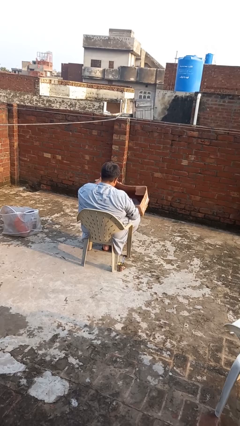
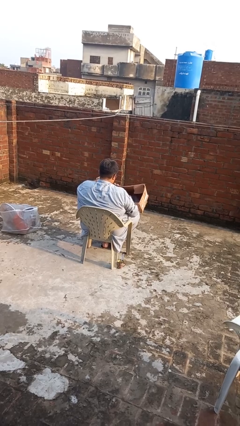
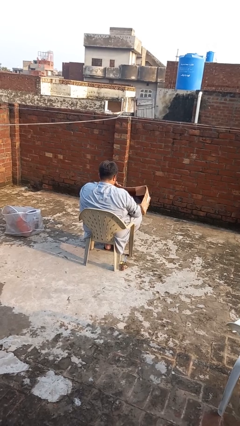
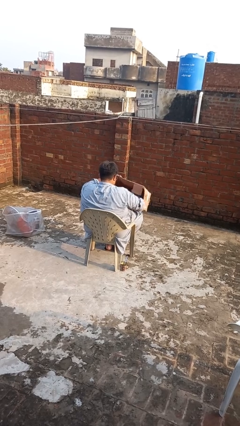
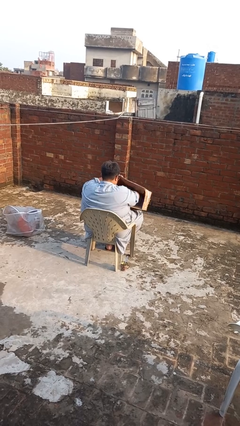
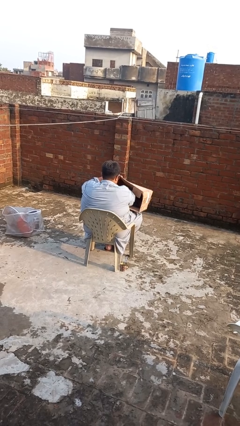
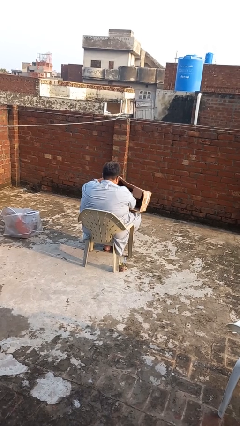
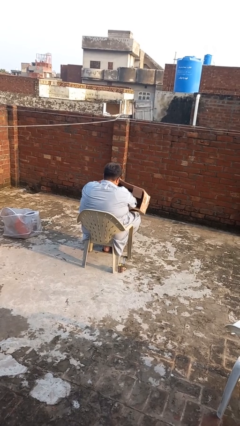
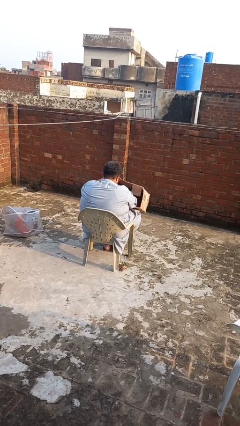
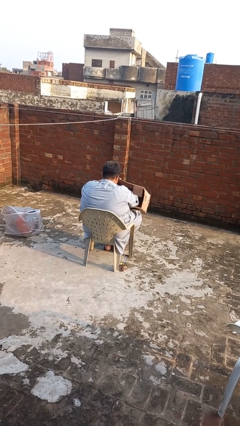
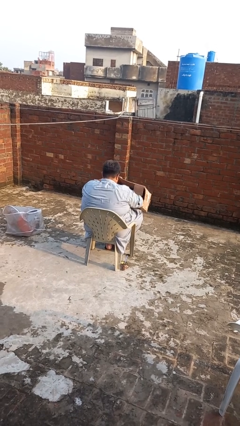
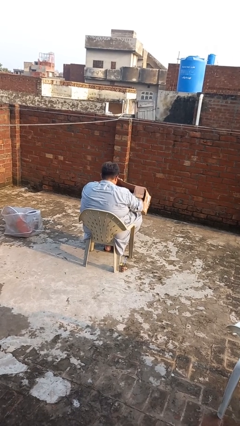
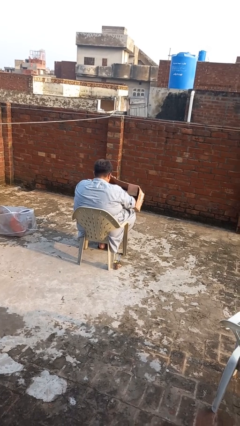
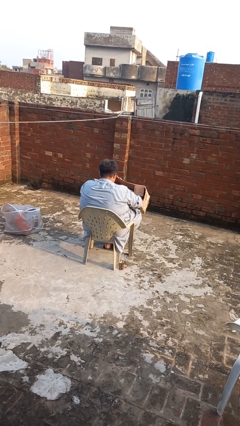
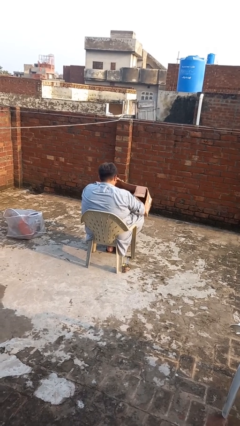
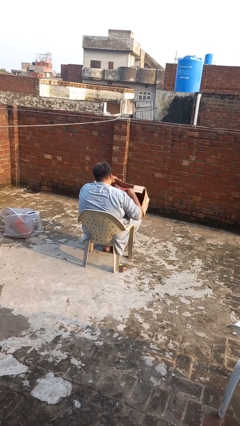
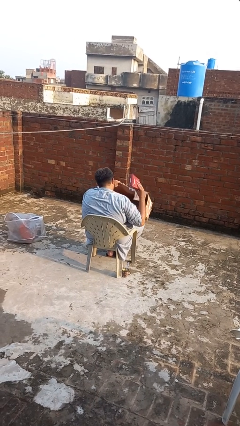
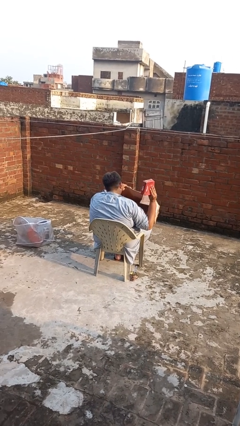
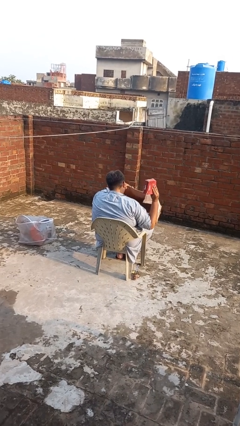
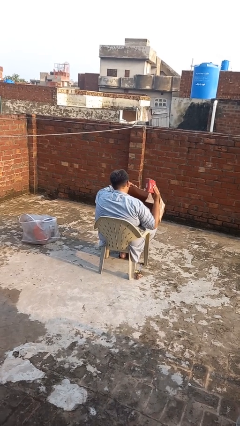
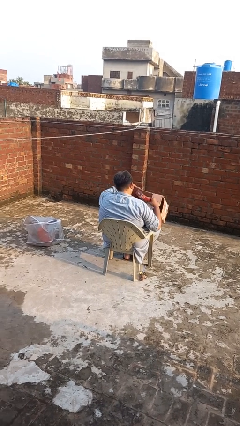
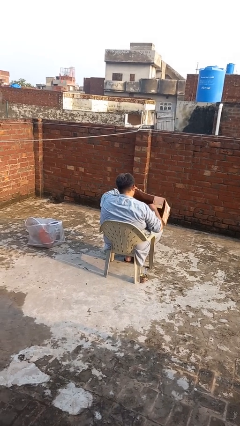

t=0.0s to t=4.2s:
person searches in box

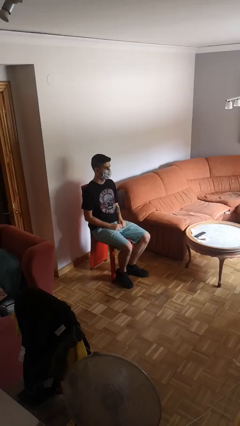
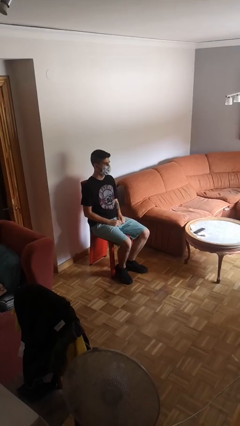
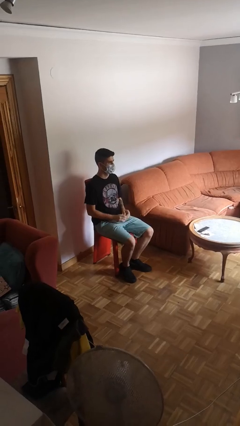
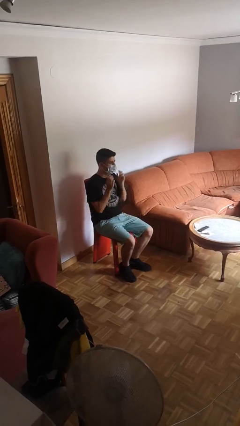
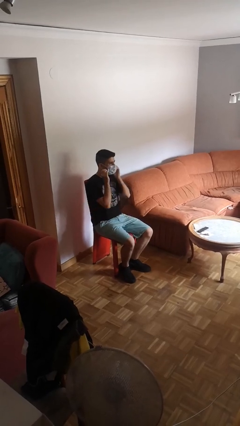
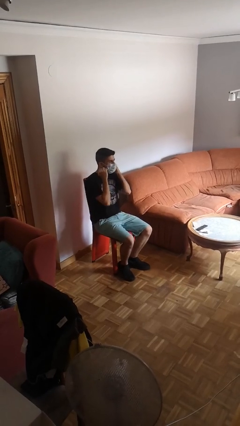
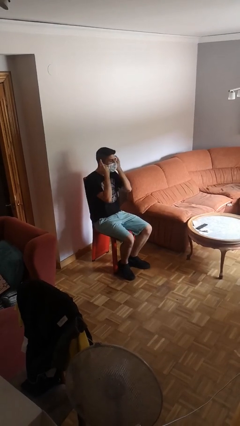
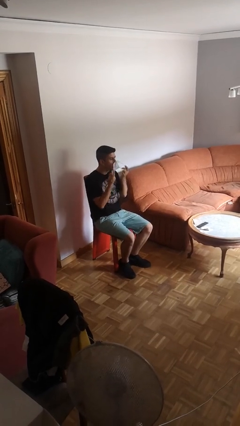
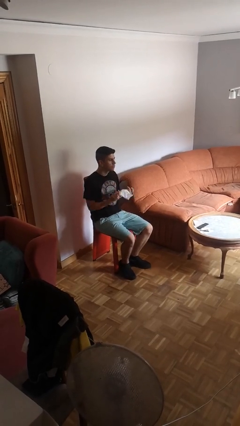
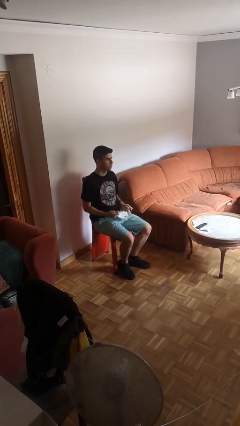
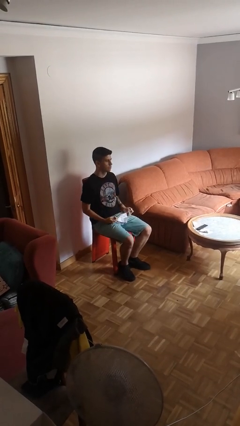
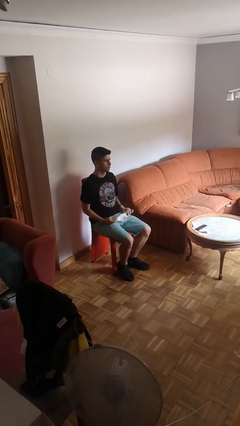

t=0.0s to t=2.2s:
person takes off facemask

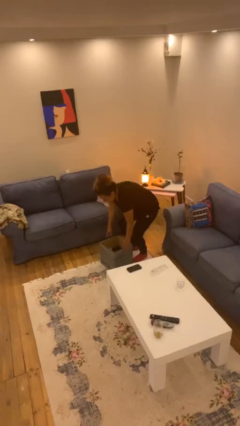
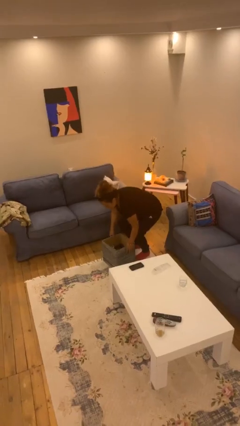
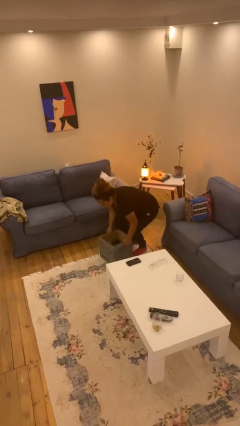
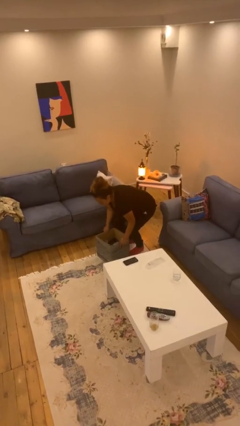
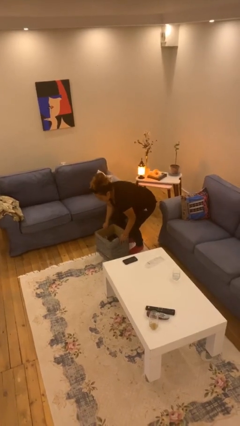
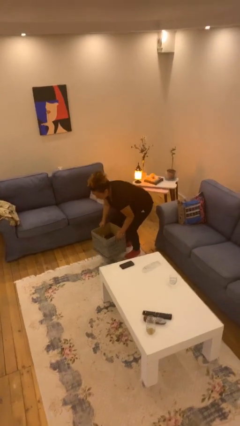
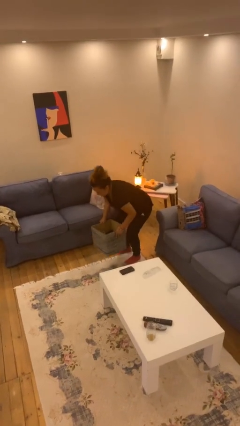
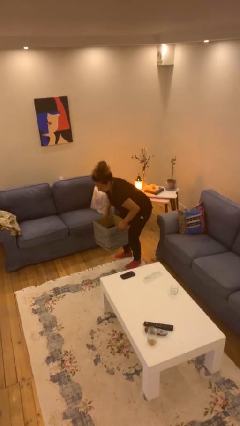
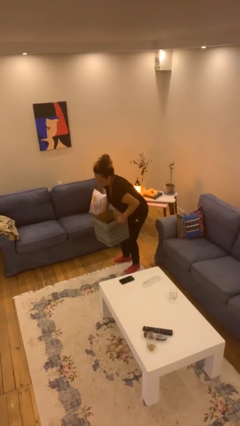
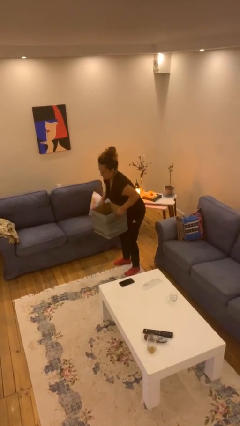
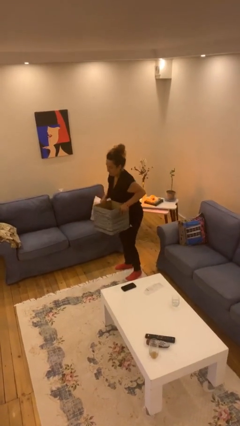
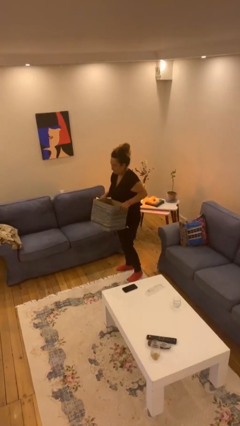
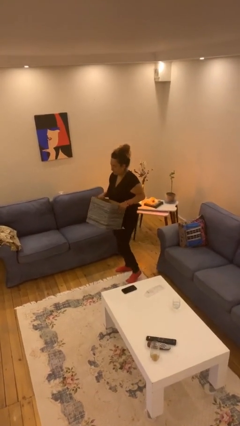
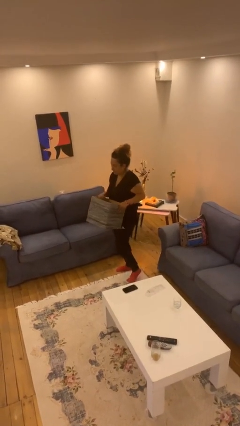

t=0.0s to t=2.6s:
person picks up object from floor

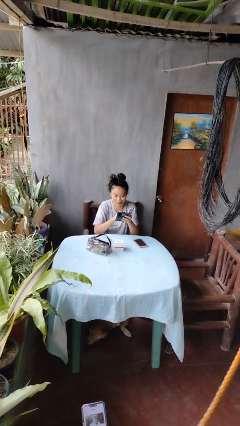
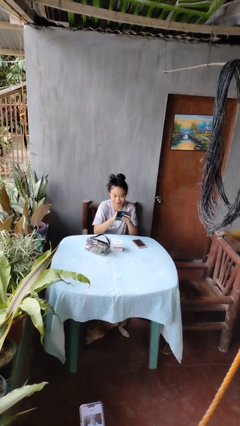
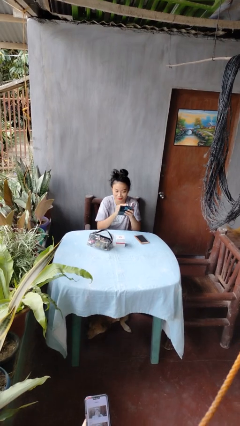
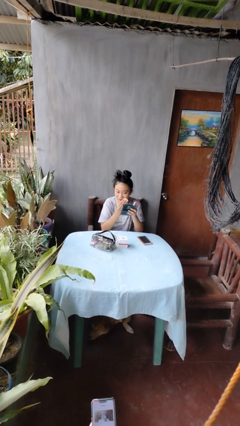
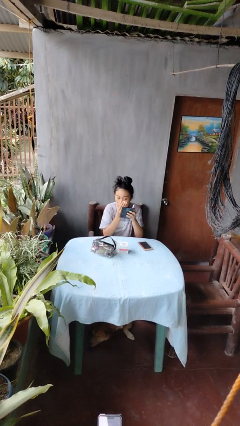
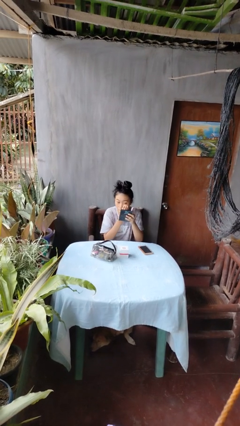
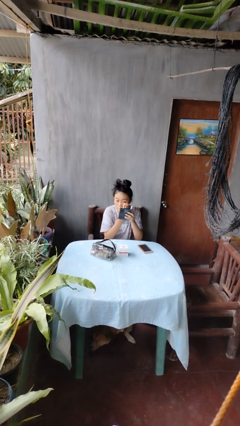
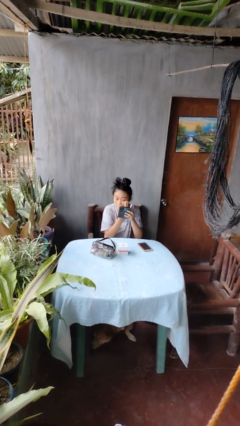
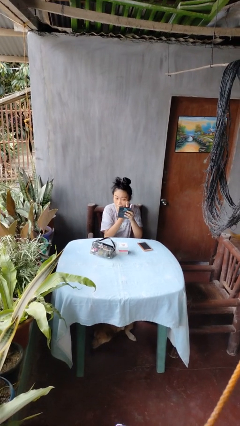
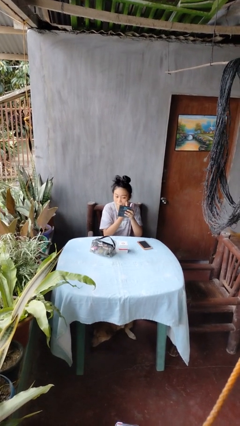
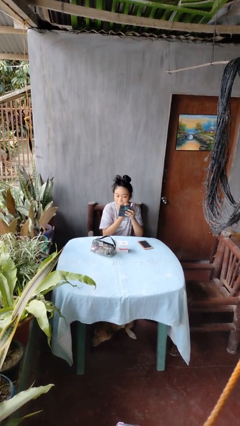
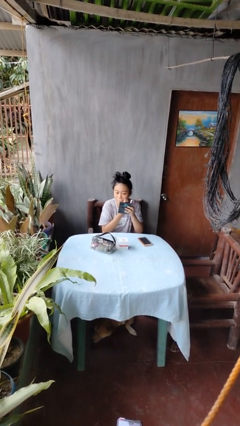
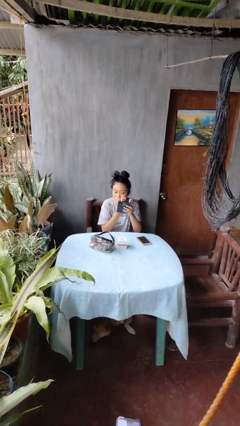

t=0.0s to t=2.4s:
person applies foundation makeup

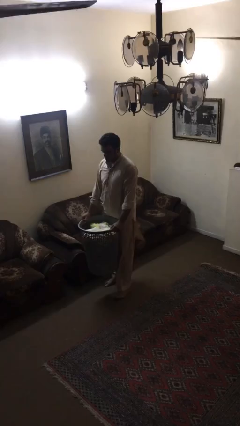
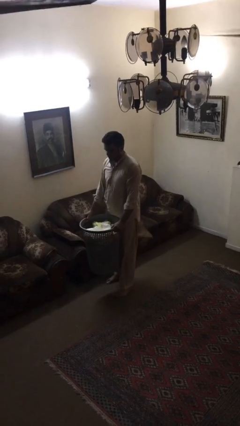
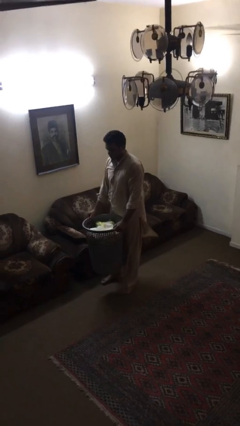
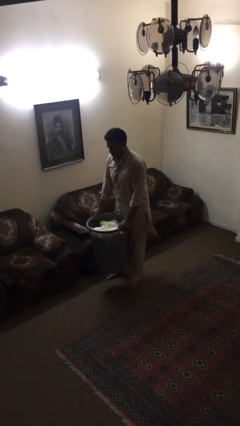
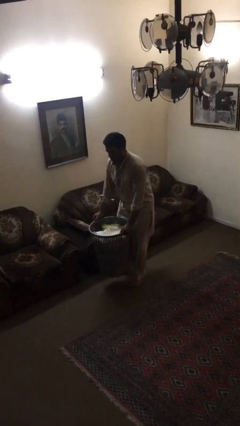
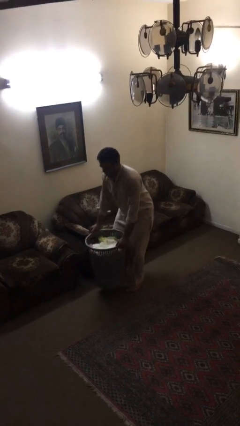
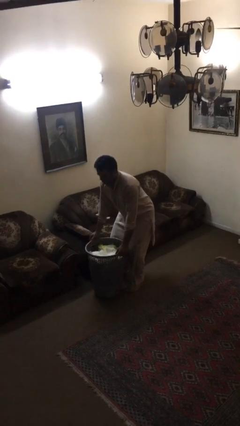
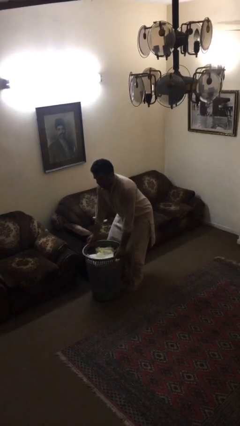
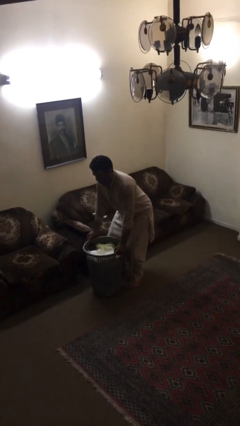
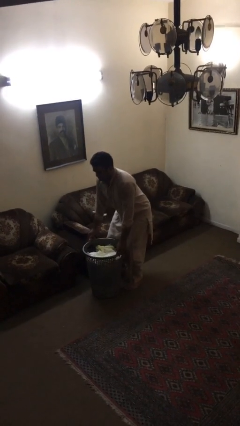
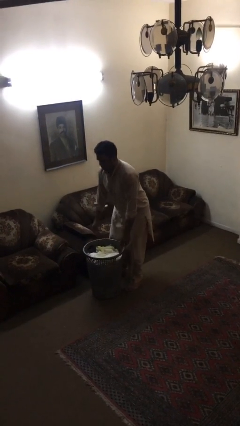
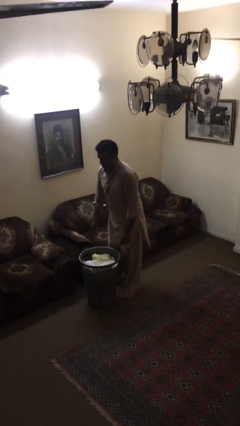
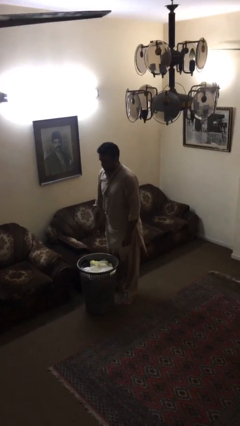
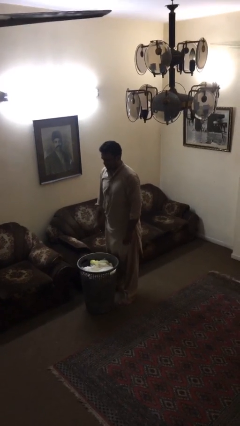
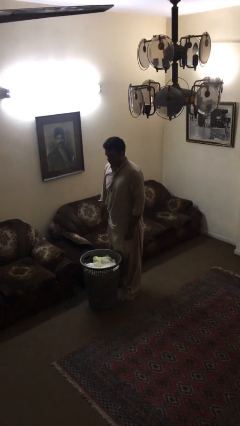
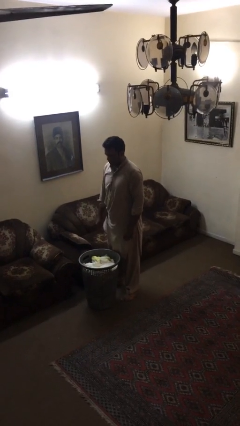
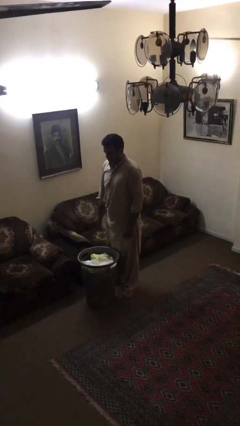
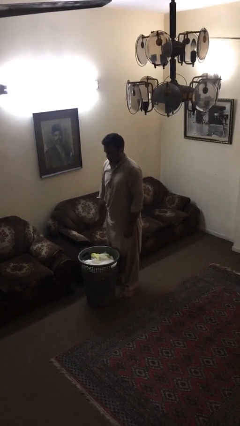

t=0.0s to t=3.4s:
person puts down object on floor

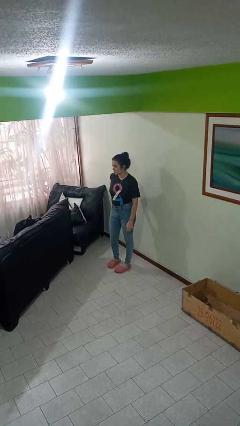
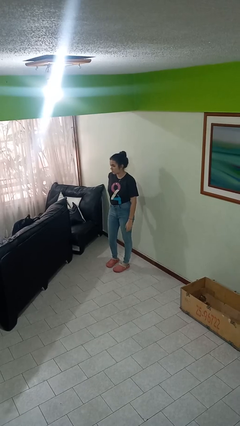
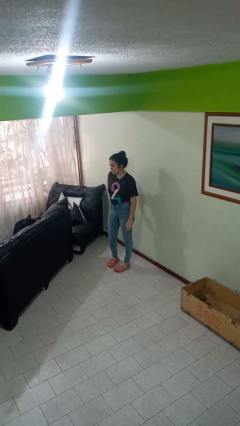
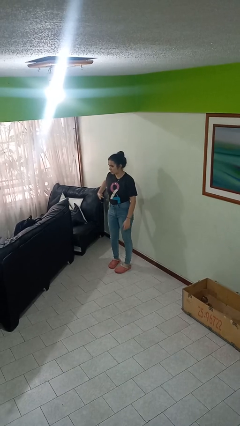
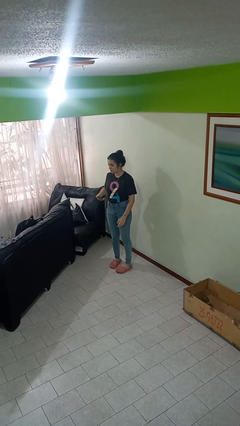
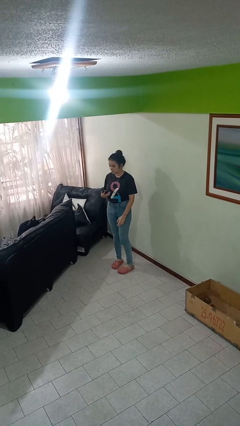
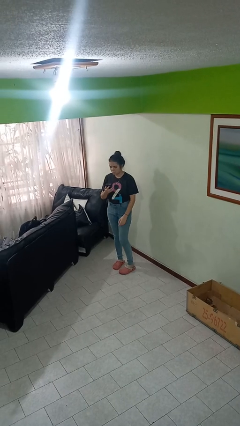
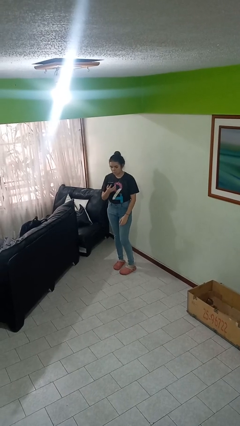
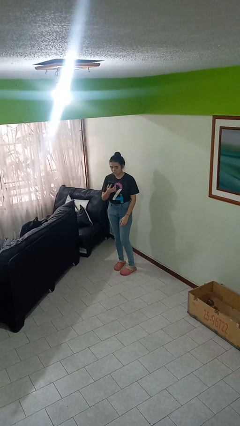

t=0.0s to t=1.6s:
person takes phone from pocket

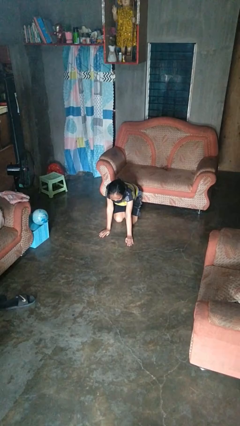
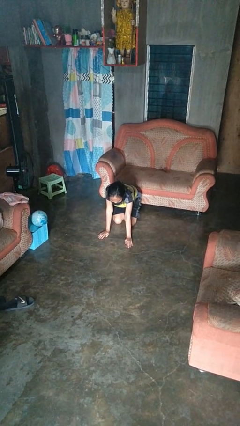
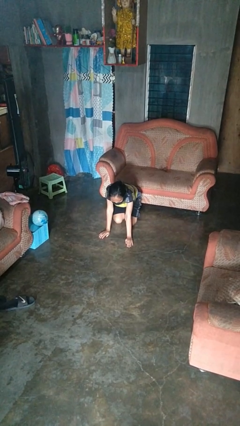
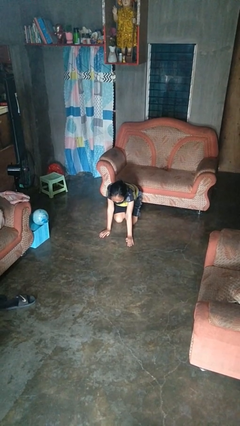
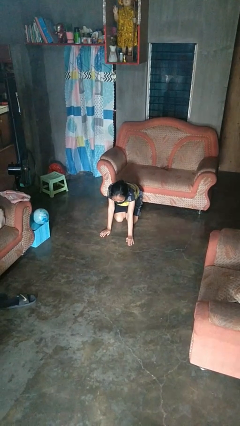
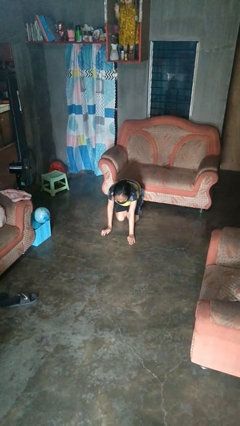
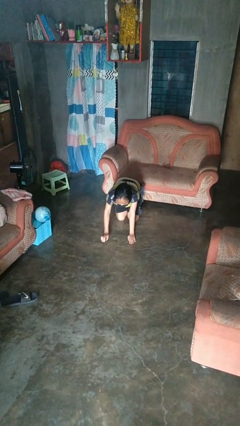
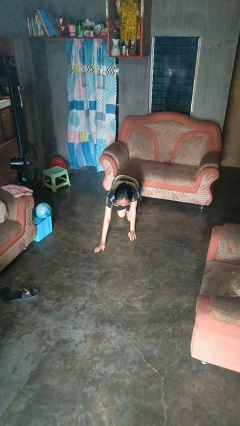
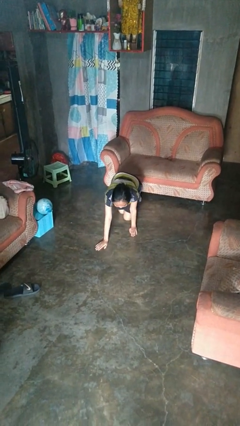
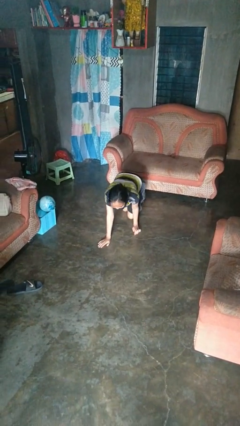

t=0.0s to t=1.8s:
person crawls
